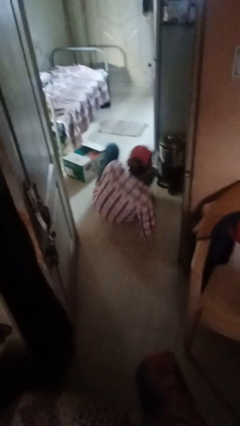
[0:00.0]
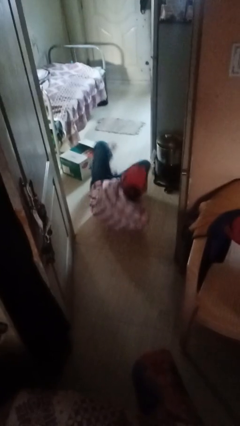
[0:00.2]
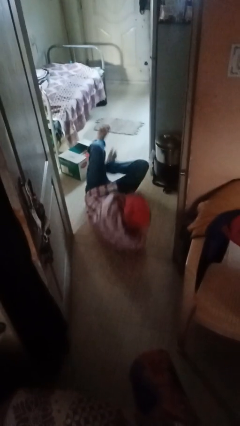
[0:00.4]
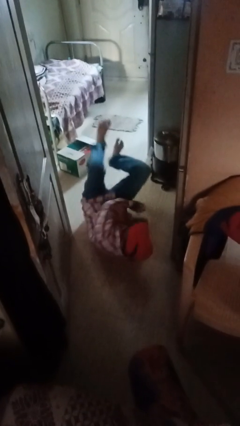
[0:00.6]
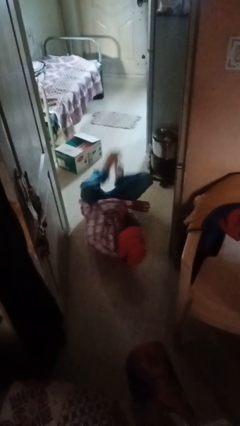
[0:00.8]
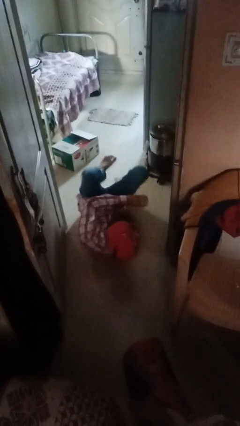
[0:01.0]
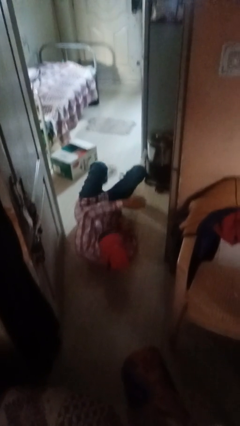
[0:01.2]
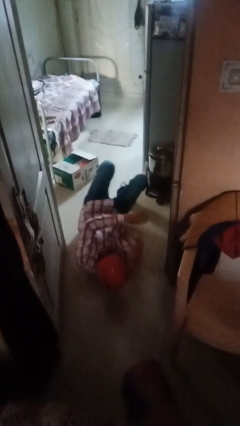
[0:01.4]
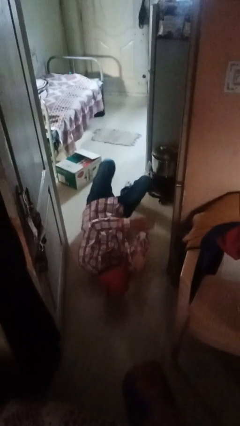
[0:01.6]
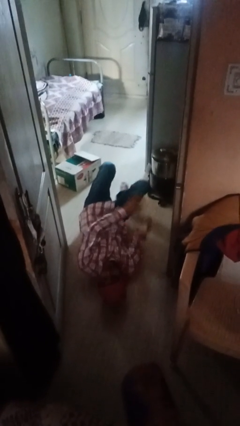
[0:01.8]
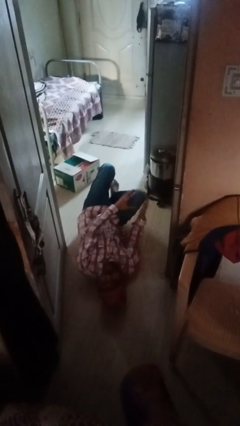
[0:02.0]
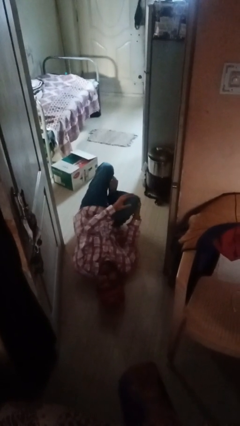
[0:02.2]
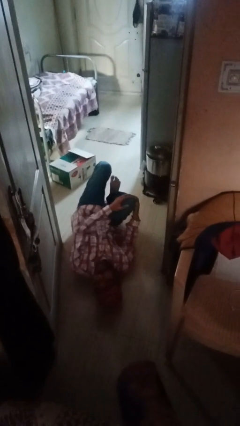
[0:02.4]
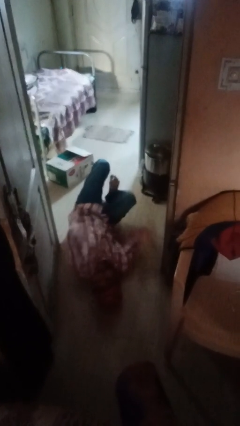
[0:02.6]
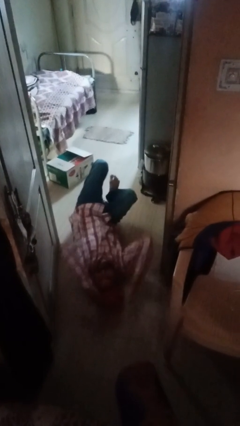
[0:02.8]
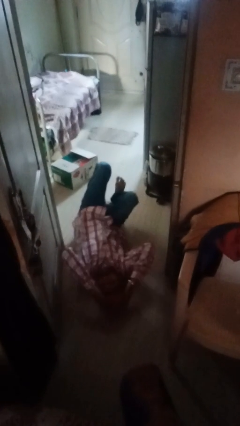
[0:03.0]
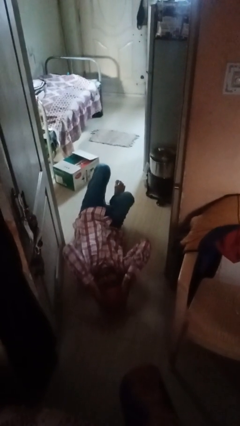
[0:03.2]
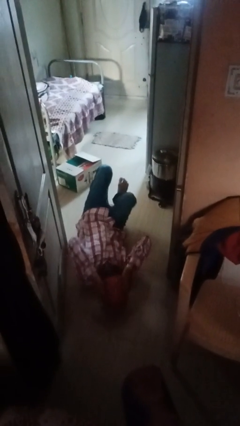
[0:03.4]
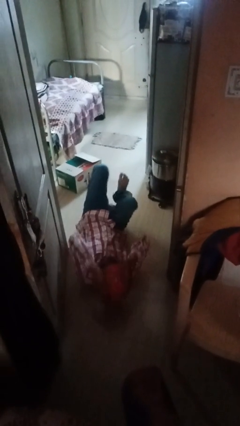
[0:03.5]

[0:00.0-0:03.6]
person lies down on floor

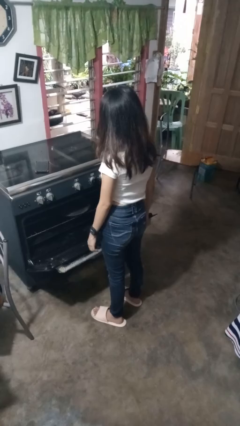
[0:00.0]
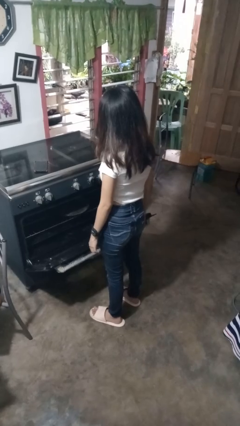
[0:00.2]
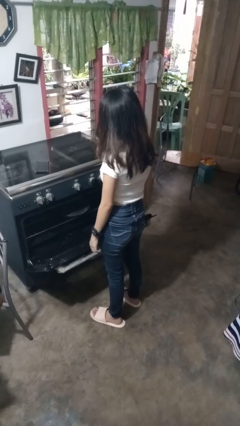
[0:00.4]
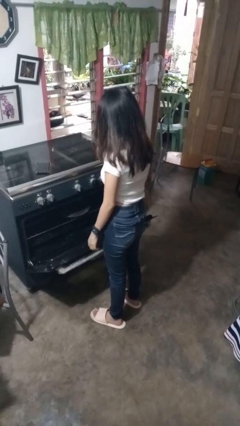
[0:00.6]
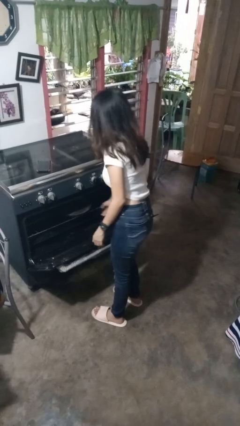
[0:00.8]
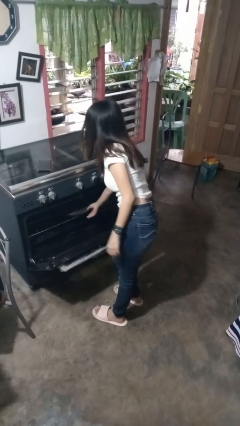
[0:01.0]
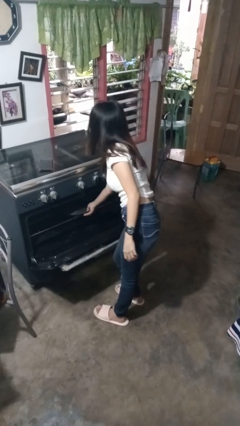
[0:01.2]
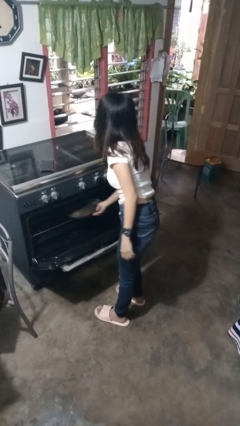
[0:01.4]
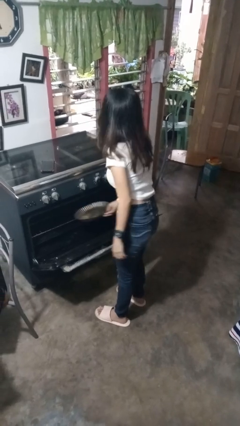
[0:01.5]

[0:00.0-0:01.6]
person takes object from oven

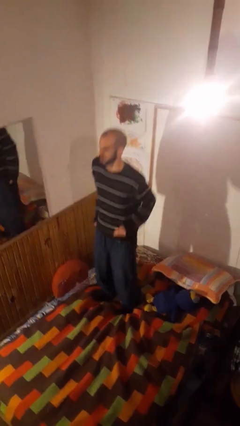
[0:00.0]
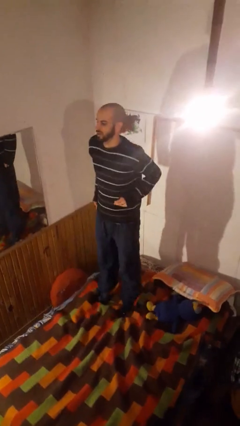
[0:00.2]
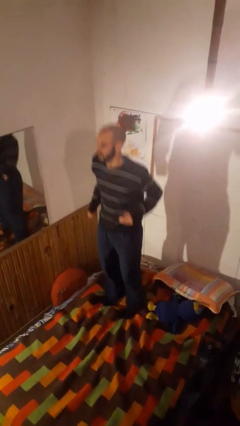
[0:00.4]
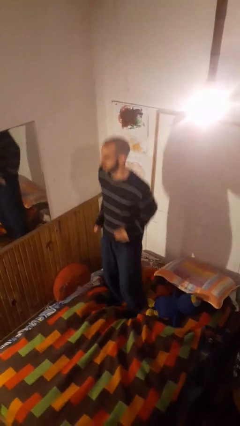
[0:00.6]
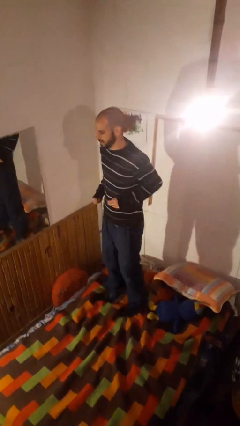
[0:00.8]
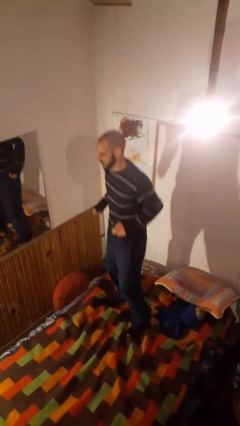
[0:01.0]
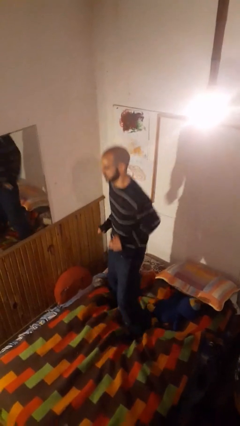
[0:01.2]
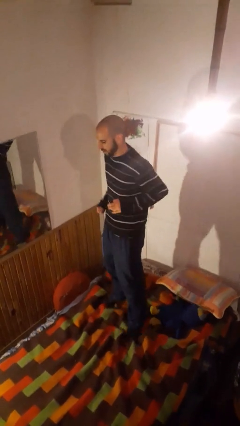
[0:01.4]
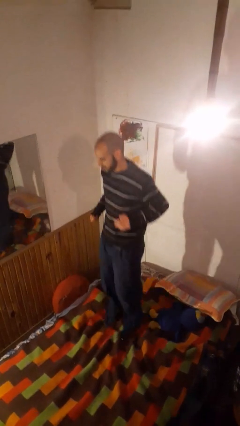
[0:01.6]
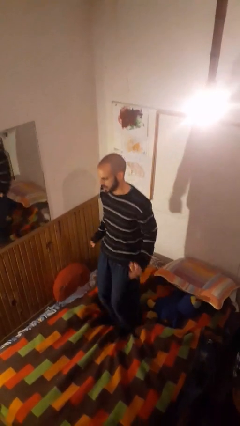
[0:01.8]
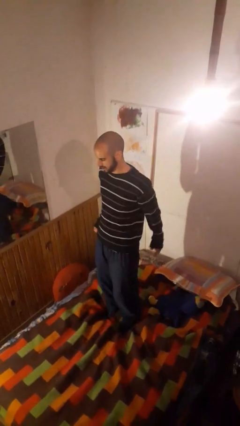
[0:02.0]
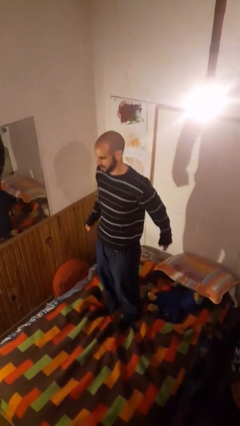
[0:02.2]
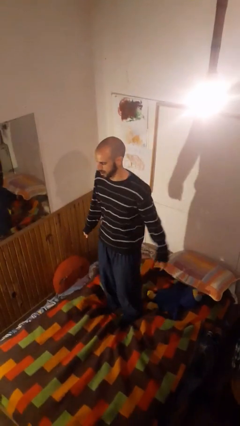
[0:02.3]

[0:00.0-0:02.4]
person jumps on bed

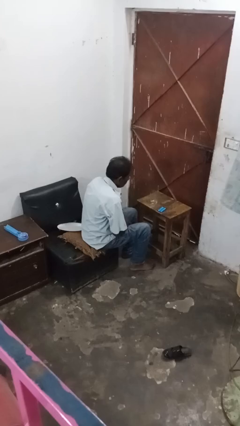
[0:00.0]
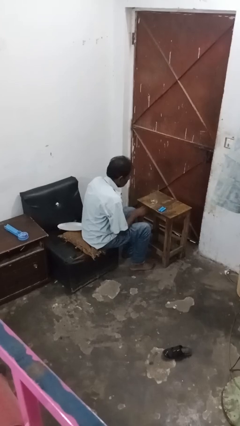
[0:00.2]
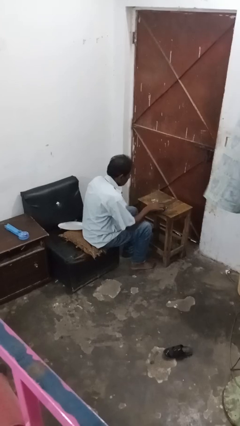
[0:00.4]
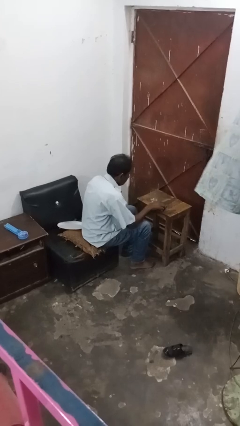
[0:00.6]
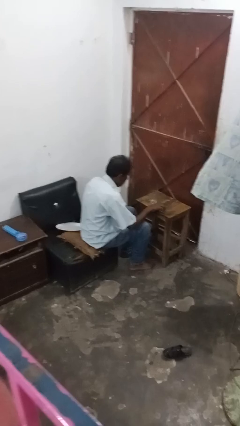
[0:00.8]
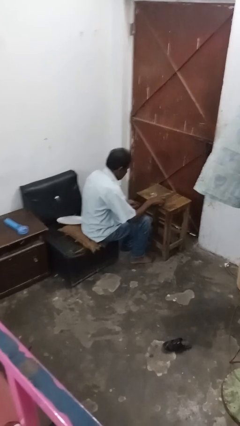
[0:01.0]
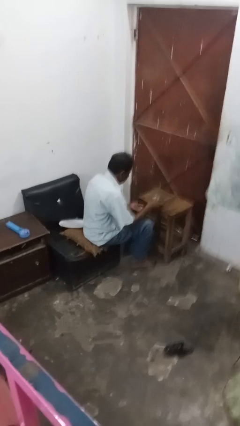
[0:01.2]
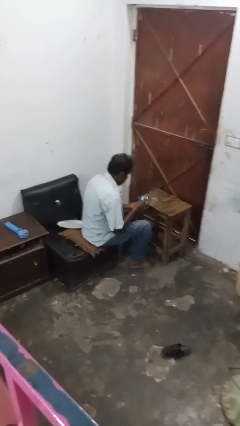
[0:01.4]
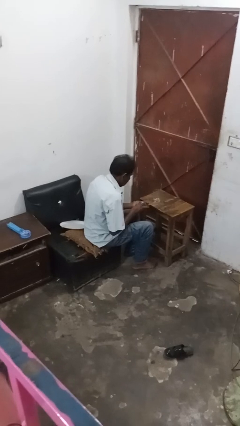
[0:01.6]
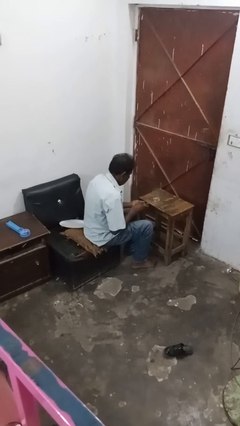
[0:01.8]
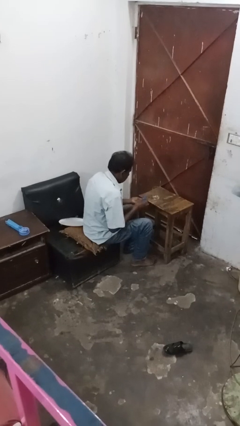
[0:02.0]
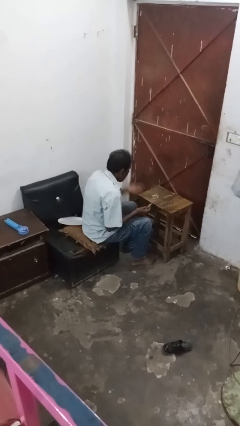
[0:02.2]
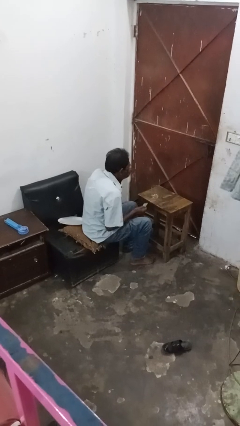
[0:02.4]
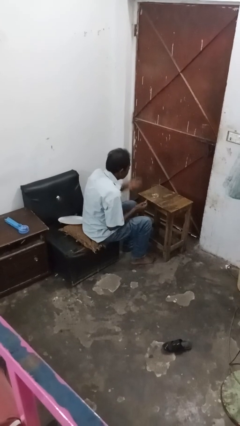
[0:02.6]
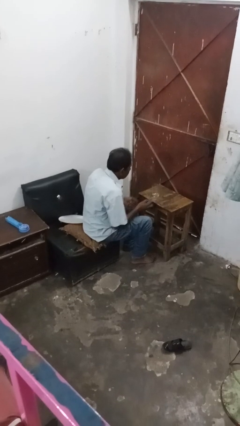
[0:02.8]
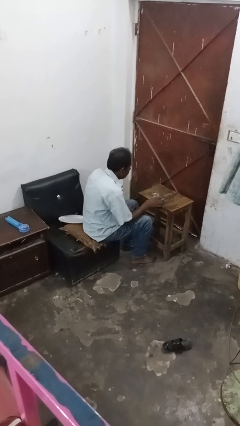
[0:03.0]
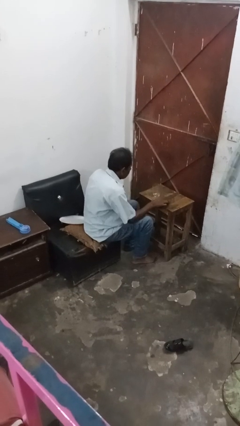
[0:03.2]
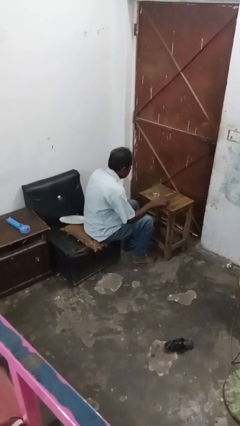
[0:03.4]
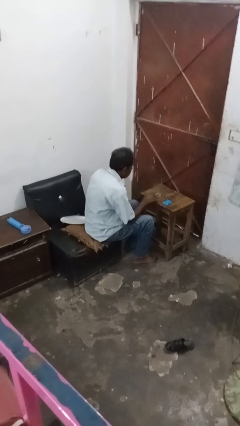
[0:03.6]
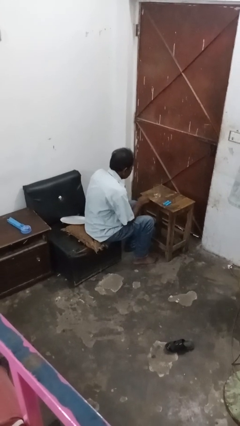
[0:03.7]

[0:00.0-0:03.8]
person takes medicine pills

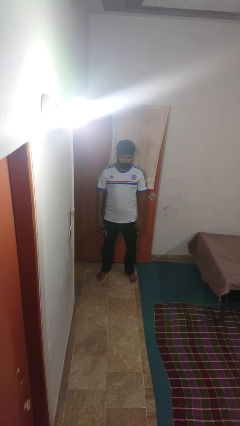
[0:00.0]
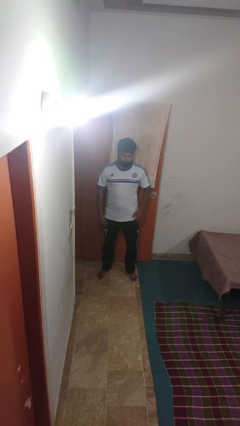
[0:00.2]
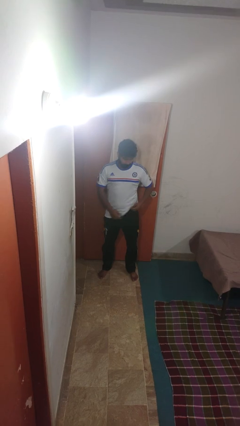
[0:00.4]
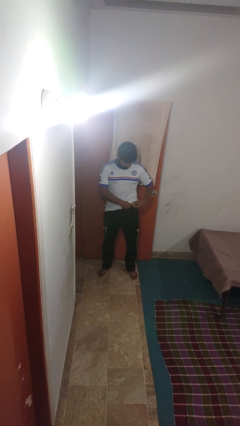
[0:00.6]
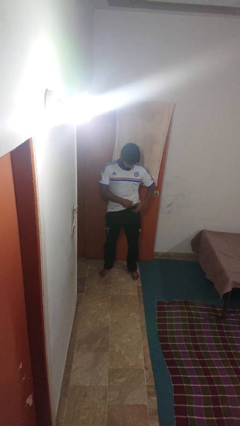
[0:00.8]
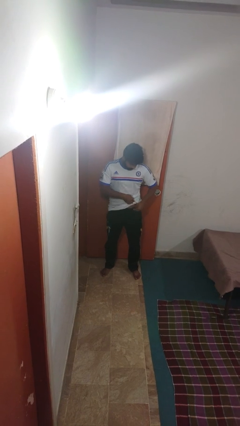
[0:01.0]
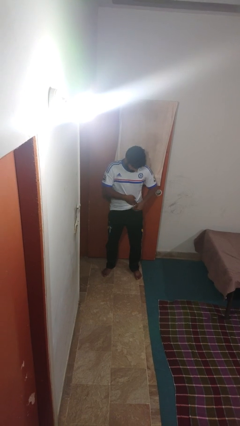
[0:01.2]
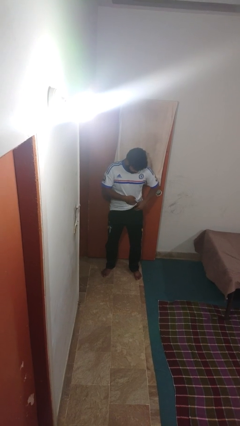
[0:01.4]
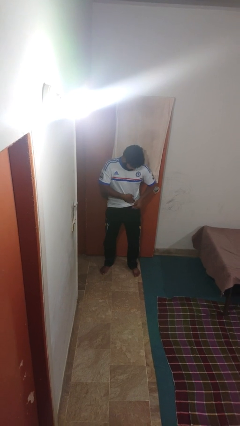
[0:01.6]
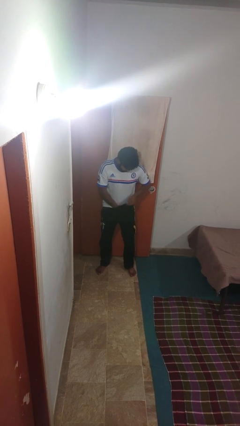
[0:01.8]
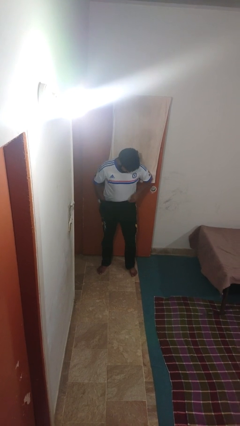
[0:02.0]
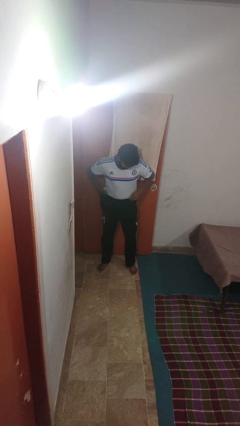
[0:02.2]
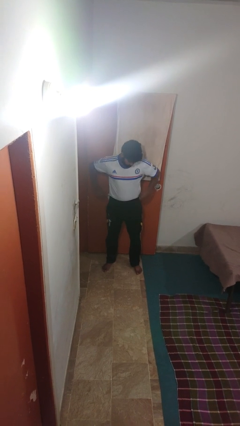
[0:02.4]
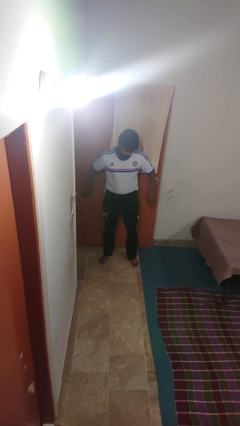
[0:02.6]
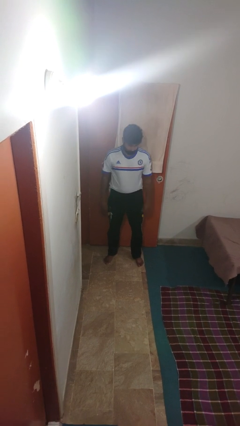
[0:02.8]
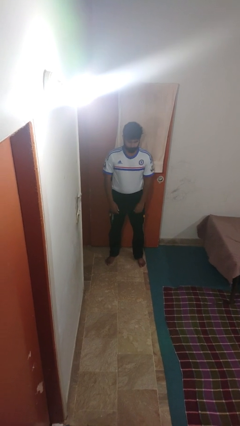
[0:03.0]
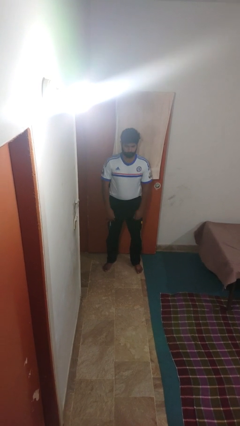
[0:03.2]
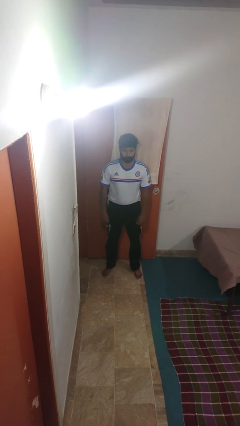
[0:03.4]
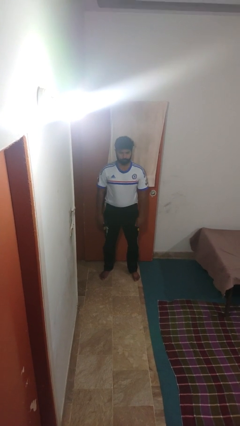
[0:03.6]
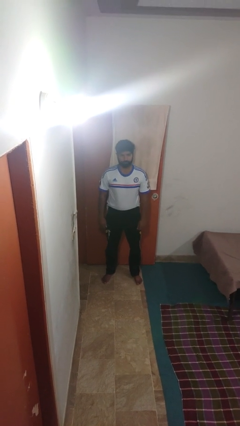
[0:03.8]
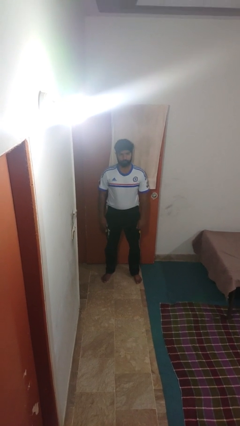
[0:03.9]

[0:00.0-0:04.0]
person tucks in shirt

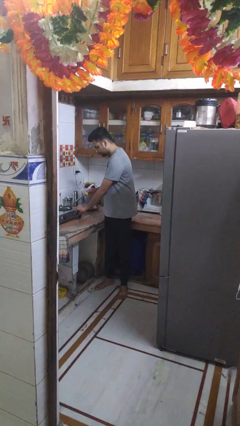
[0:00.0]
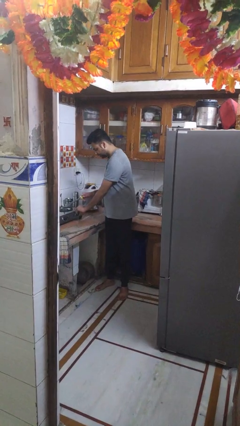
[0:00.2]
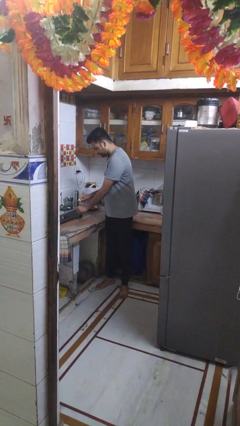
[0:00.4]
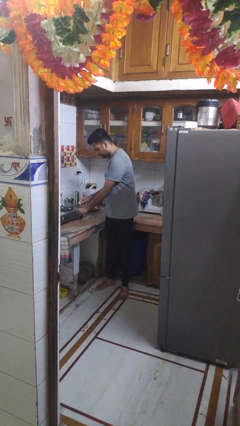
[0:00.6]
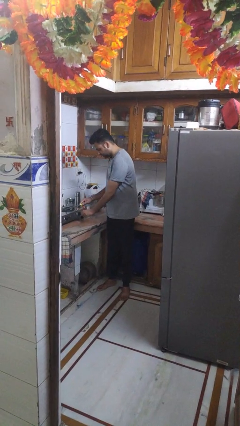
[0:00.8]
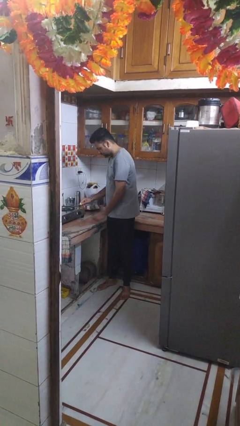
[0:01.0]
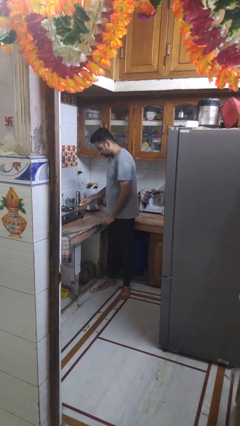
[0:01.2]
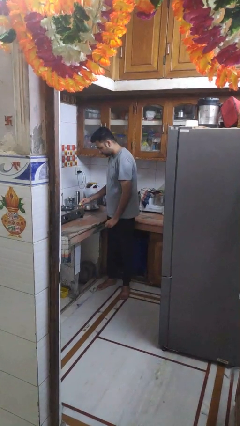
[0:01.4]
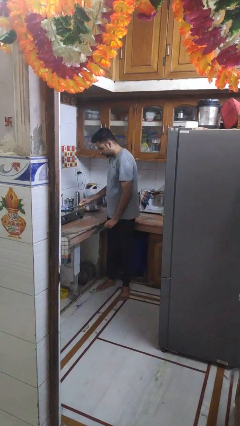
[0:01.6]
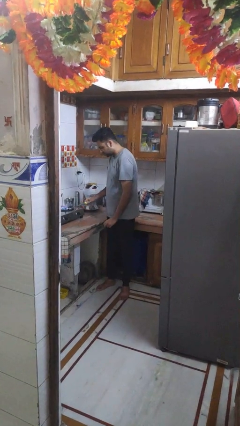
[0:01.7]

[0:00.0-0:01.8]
person turns on stovetop
